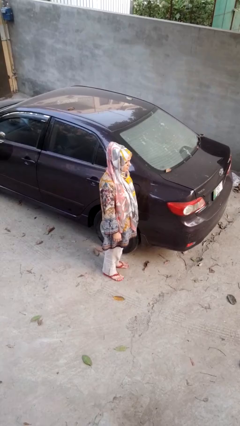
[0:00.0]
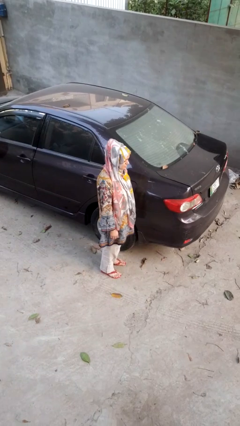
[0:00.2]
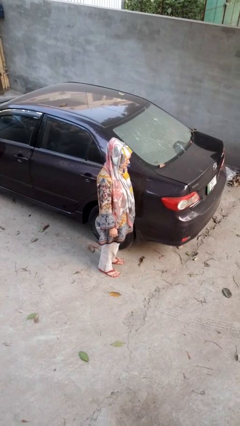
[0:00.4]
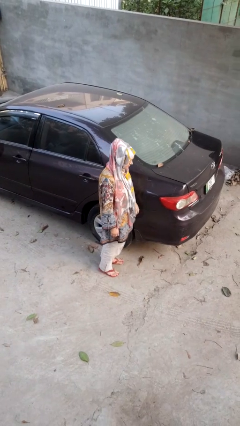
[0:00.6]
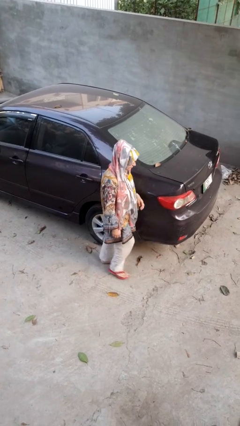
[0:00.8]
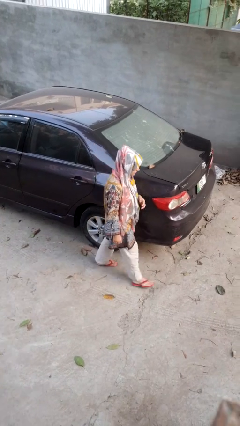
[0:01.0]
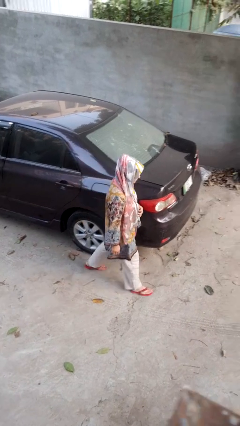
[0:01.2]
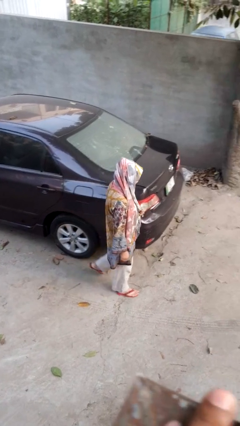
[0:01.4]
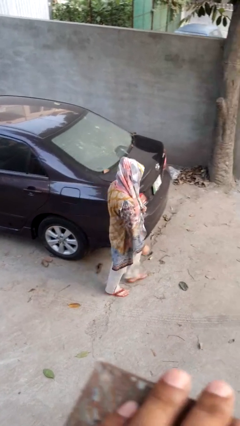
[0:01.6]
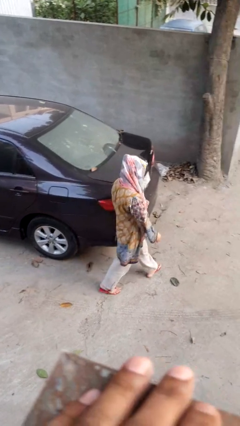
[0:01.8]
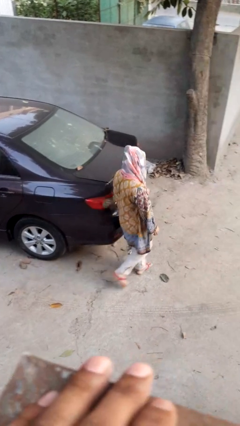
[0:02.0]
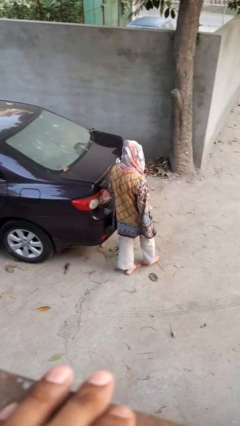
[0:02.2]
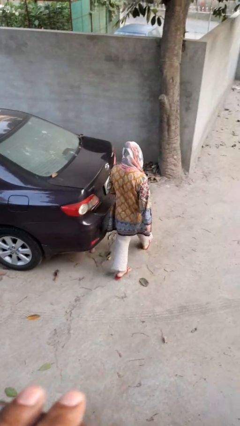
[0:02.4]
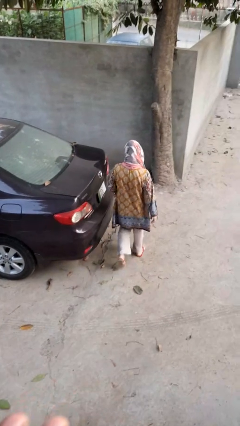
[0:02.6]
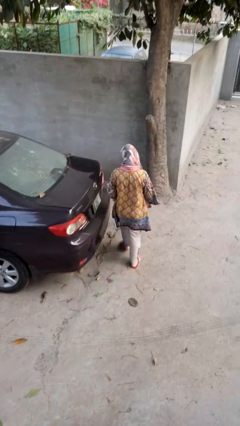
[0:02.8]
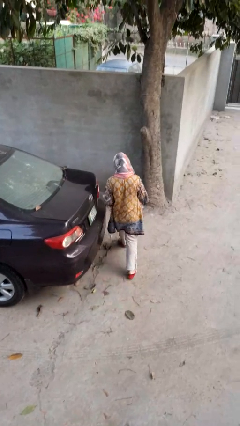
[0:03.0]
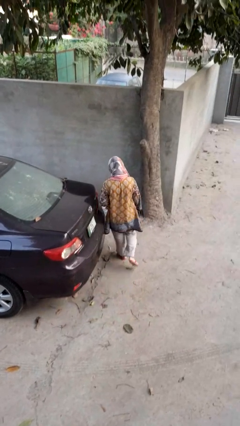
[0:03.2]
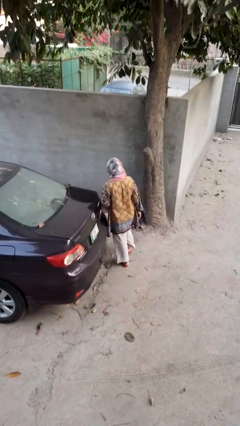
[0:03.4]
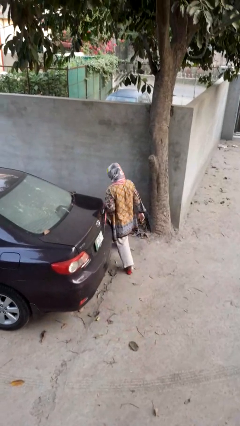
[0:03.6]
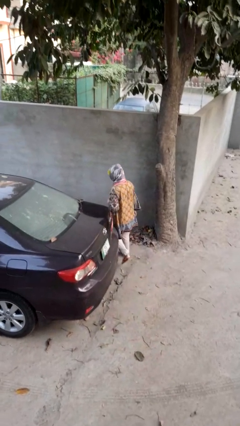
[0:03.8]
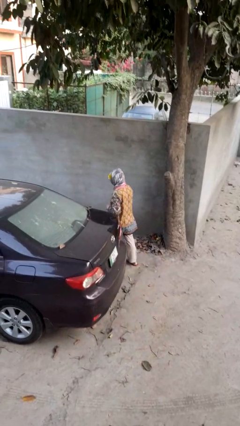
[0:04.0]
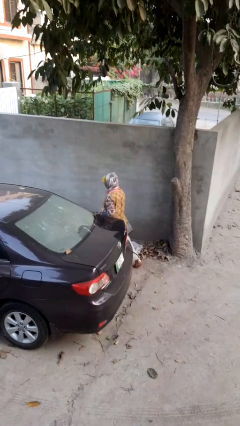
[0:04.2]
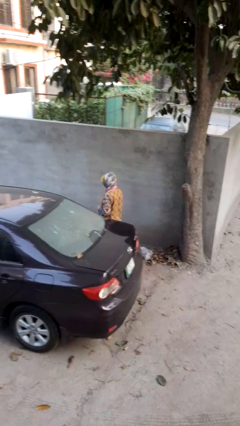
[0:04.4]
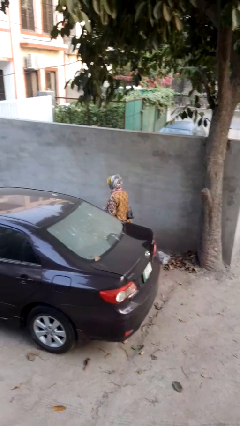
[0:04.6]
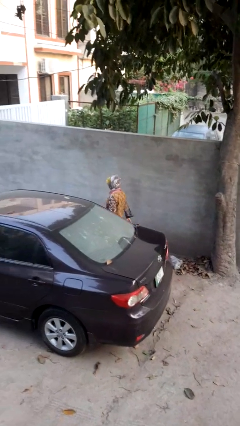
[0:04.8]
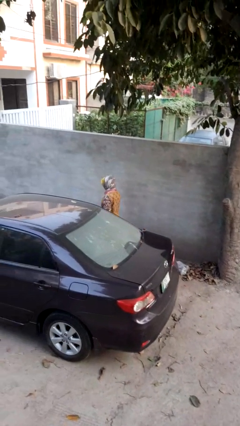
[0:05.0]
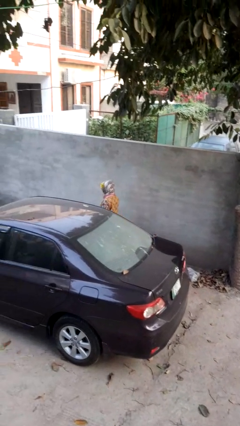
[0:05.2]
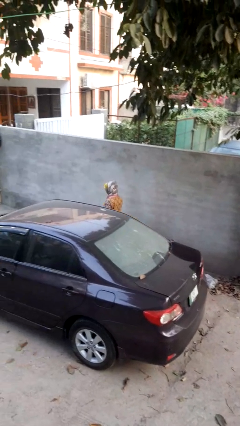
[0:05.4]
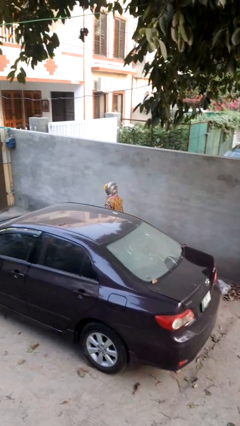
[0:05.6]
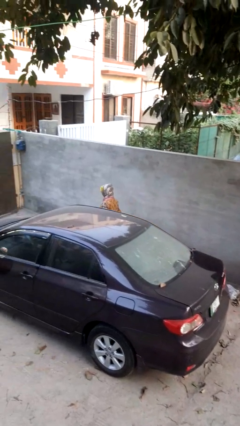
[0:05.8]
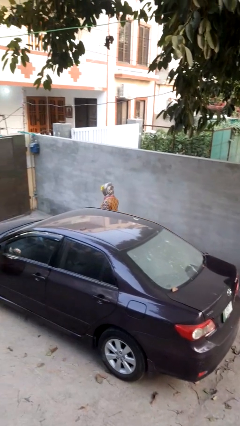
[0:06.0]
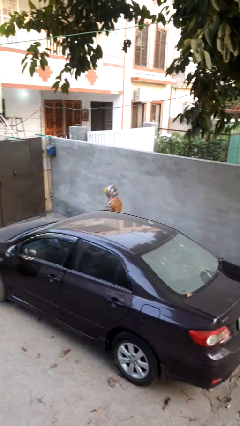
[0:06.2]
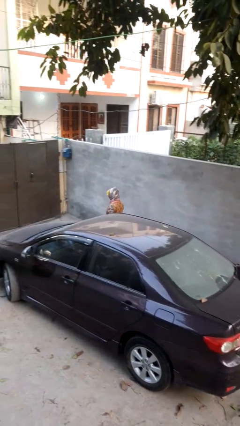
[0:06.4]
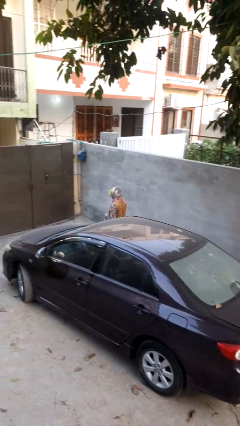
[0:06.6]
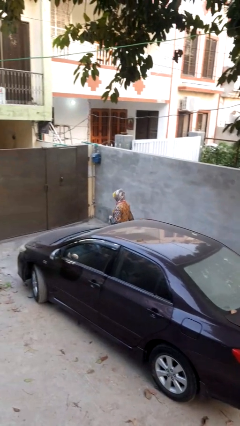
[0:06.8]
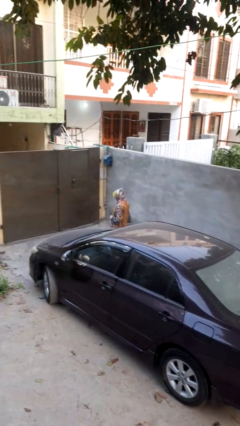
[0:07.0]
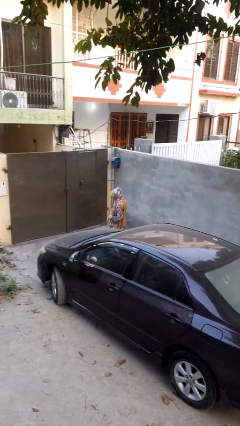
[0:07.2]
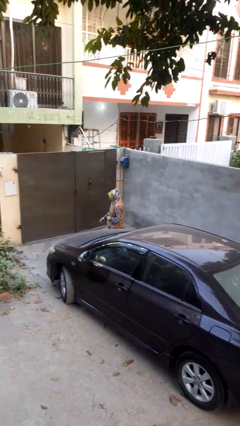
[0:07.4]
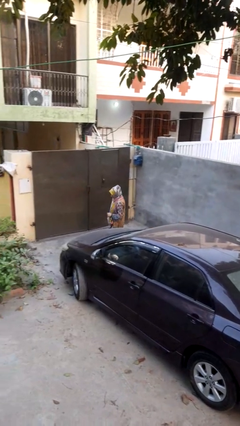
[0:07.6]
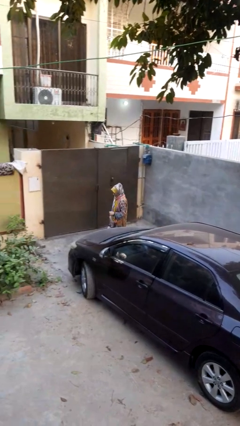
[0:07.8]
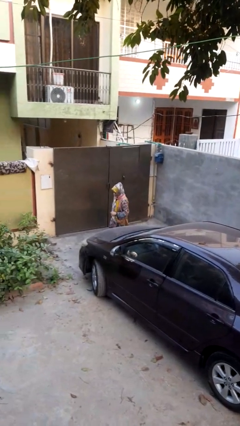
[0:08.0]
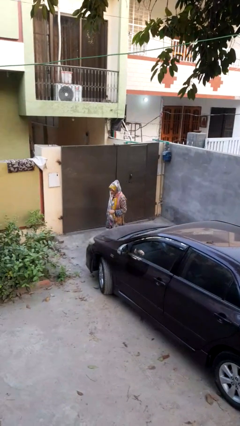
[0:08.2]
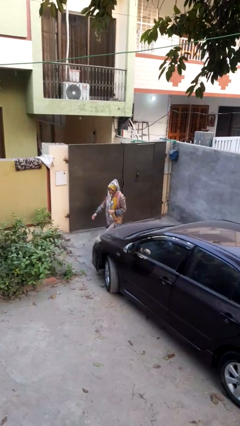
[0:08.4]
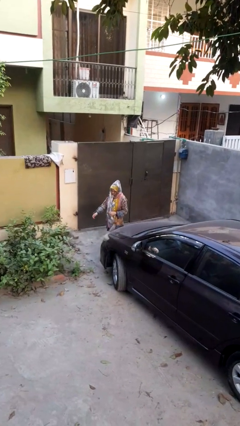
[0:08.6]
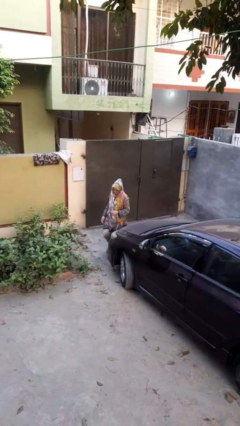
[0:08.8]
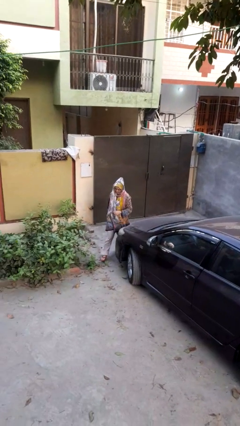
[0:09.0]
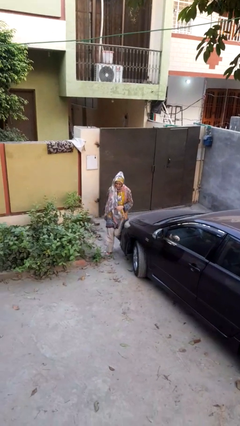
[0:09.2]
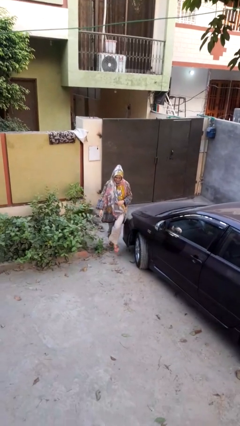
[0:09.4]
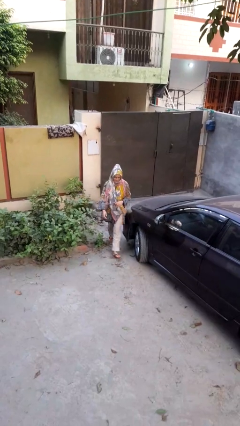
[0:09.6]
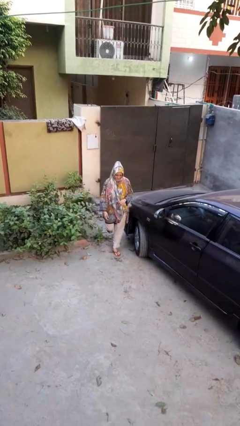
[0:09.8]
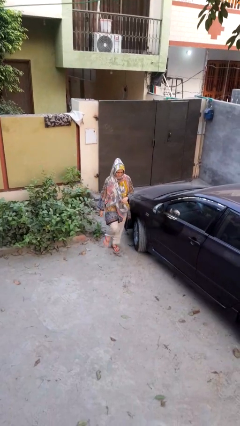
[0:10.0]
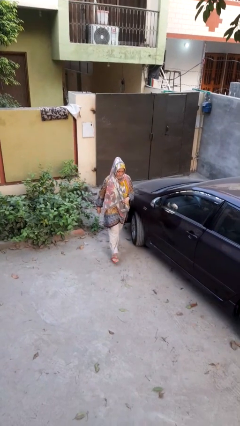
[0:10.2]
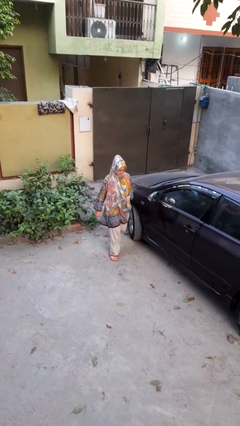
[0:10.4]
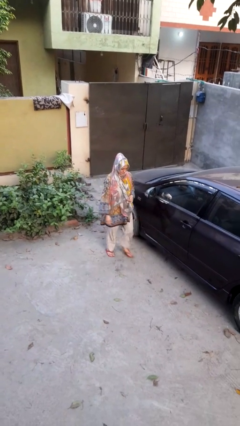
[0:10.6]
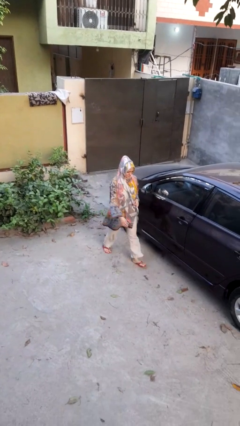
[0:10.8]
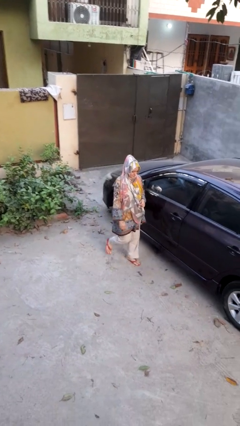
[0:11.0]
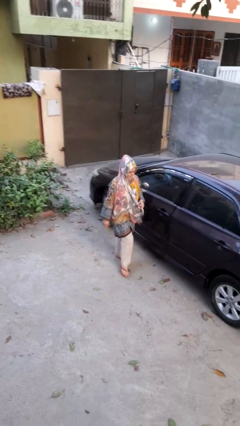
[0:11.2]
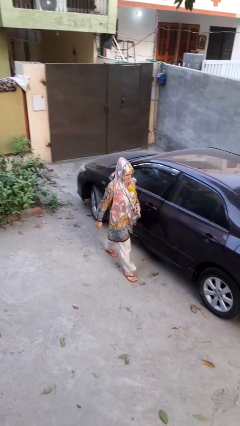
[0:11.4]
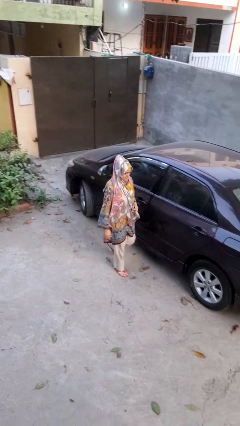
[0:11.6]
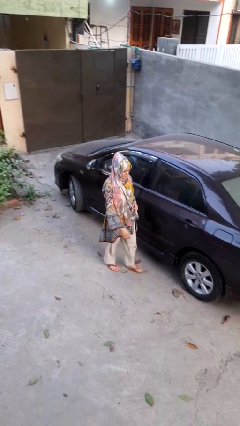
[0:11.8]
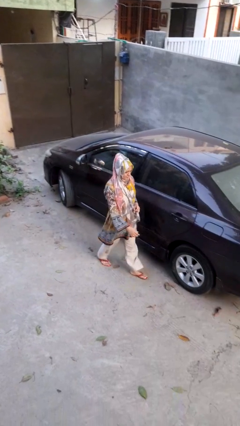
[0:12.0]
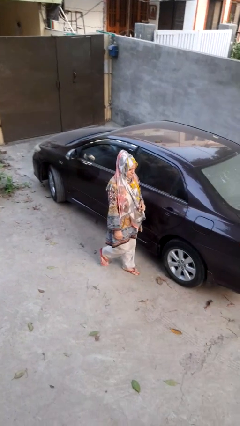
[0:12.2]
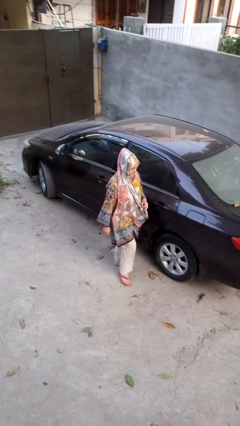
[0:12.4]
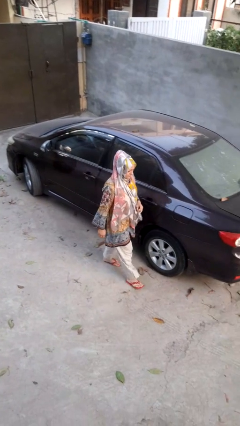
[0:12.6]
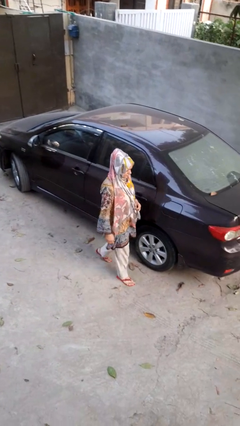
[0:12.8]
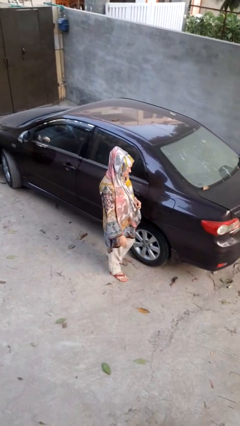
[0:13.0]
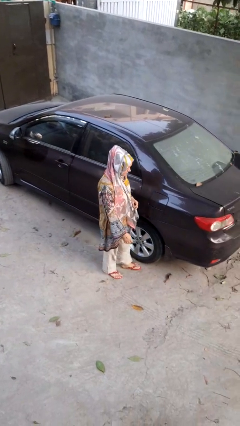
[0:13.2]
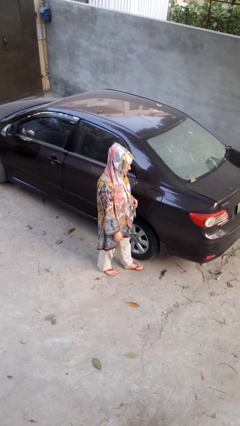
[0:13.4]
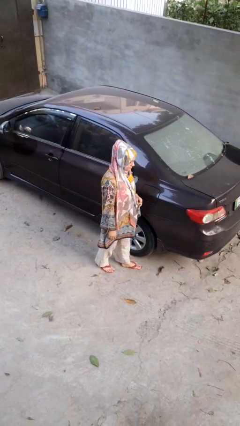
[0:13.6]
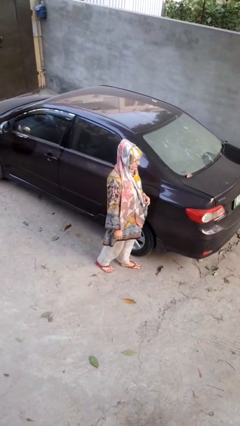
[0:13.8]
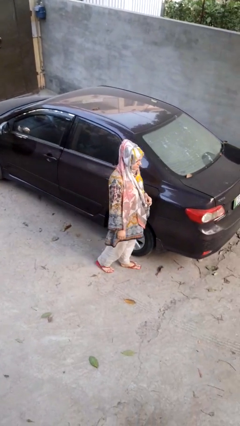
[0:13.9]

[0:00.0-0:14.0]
person walks around car

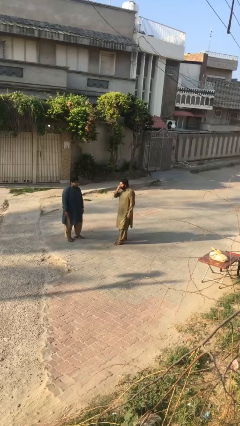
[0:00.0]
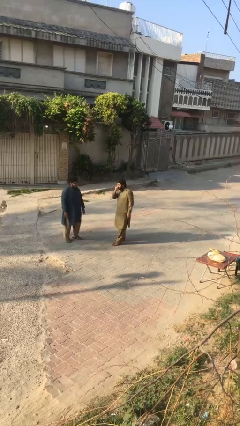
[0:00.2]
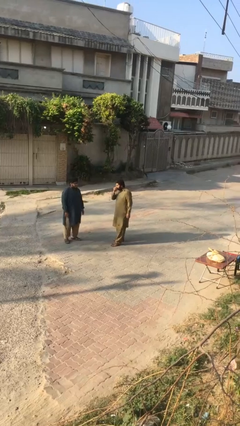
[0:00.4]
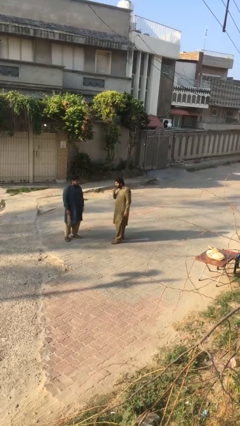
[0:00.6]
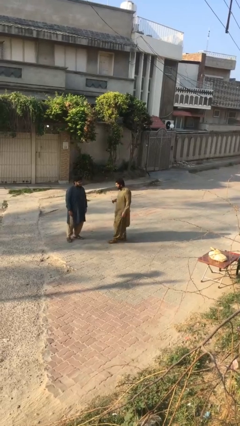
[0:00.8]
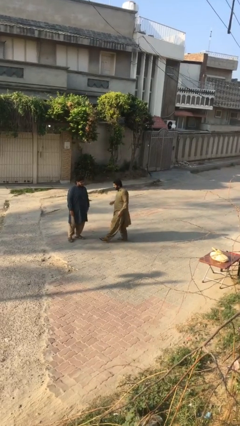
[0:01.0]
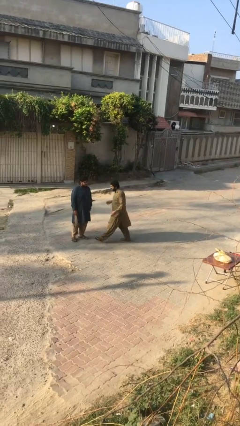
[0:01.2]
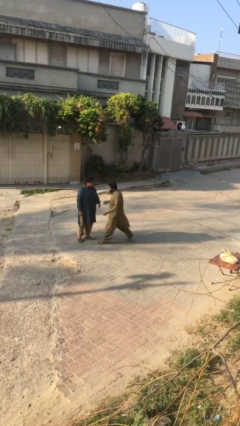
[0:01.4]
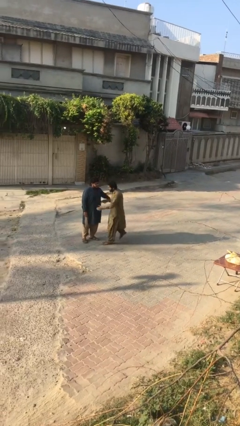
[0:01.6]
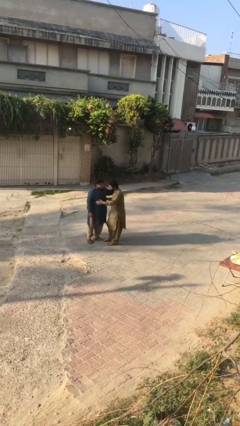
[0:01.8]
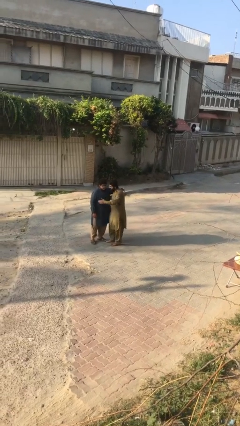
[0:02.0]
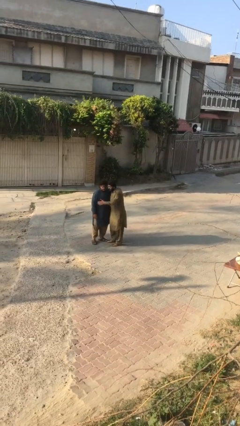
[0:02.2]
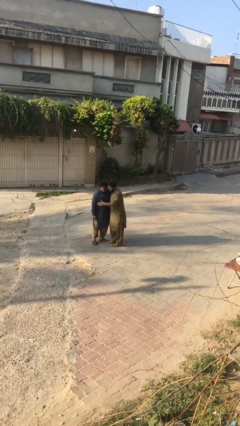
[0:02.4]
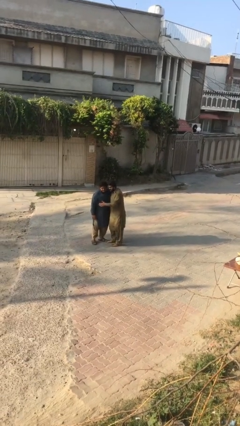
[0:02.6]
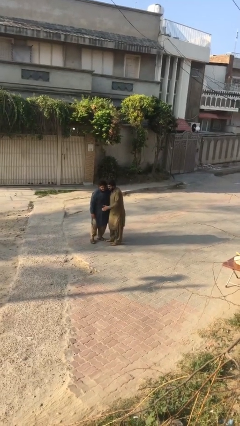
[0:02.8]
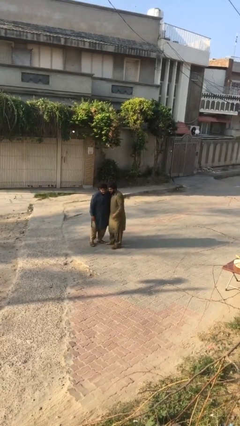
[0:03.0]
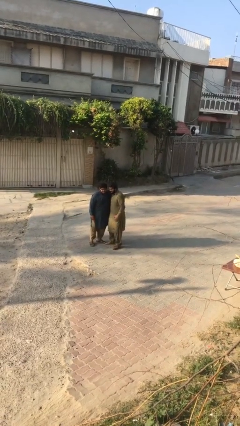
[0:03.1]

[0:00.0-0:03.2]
person embraces person

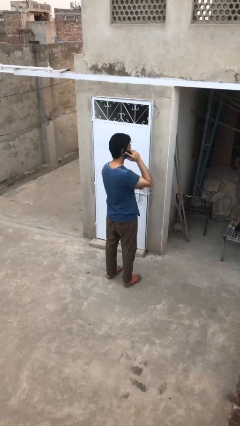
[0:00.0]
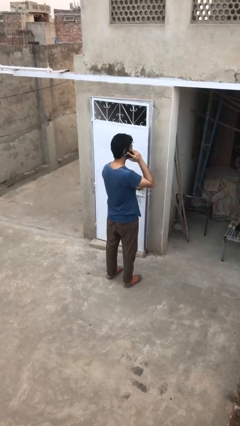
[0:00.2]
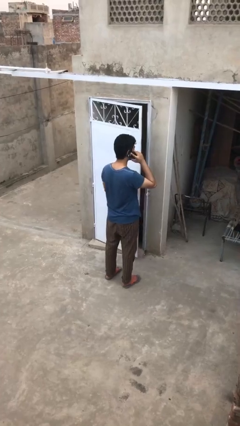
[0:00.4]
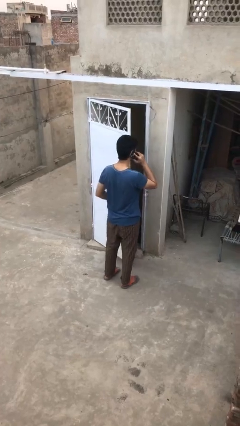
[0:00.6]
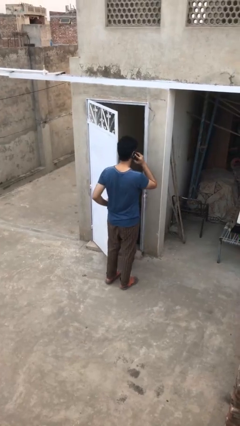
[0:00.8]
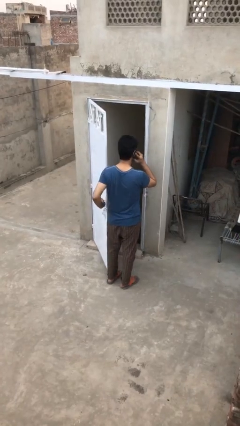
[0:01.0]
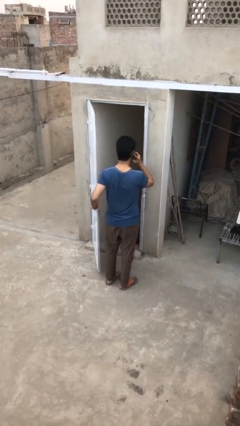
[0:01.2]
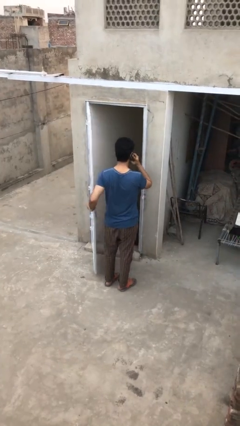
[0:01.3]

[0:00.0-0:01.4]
person opens facility door
